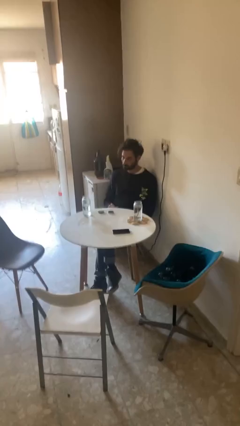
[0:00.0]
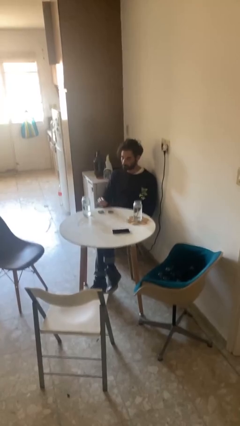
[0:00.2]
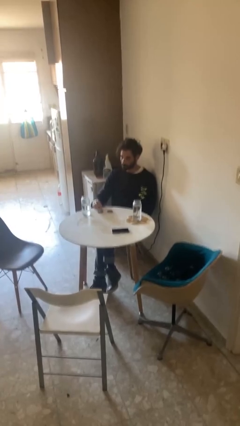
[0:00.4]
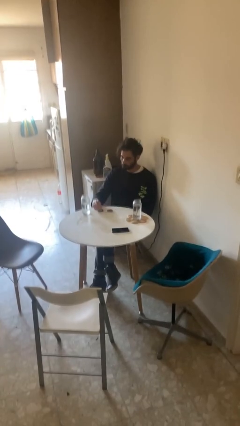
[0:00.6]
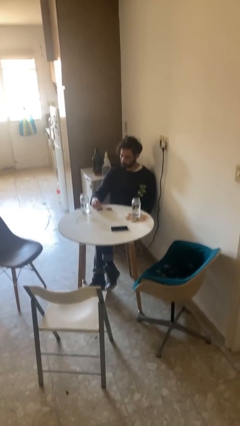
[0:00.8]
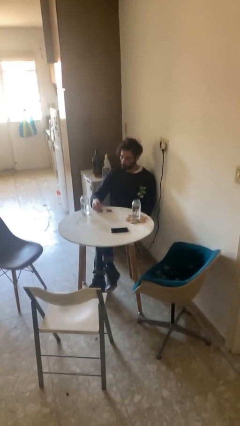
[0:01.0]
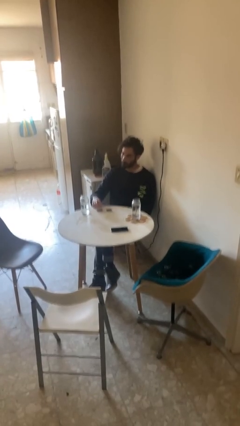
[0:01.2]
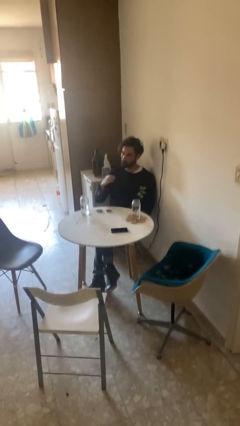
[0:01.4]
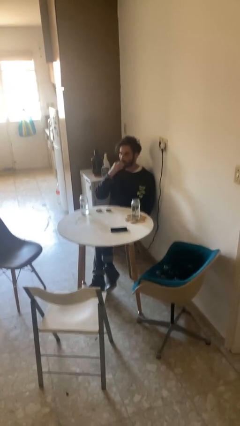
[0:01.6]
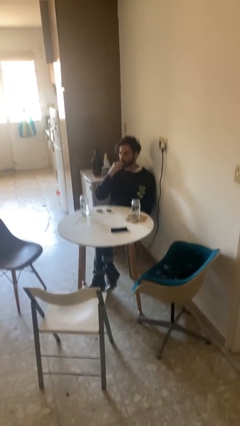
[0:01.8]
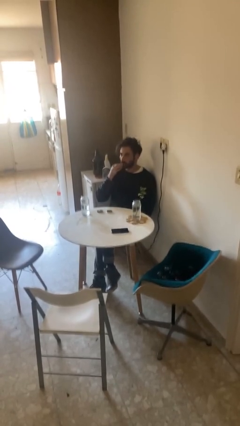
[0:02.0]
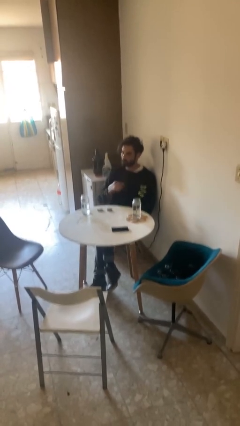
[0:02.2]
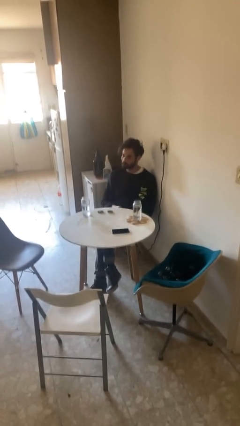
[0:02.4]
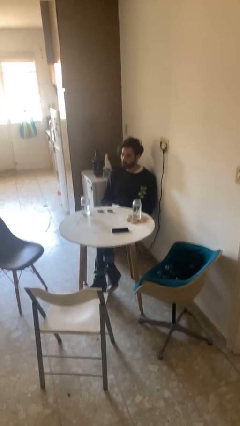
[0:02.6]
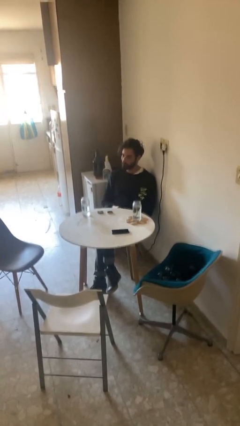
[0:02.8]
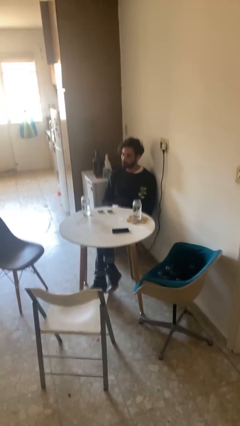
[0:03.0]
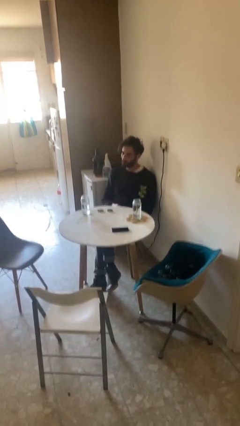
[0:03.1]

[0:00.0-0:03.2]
person takes medicine pills

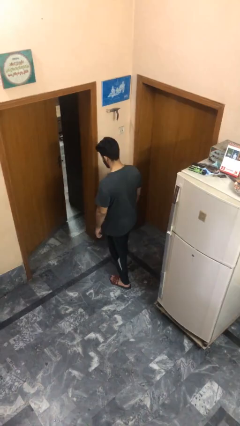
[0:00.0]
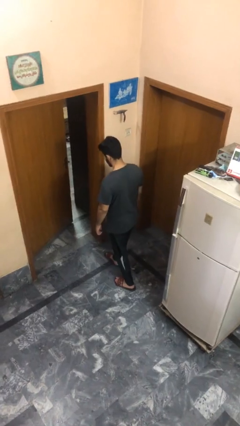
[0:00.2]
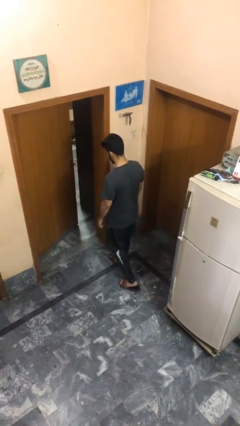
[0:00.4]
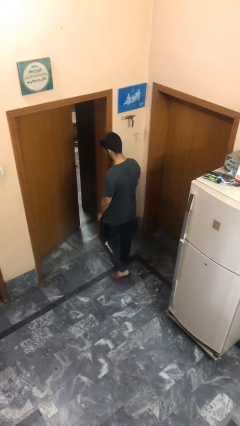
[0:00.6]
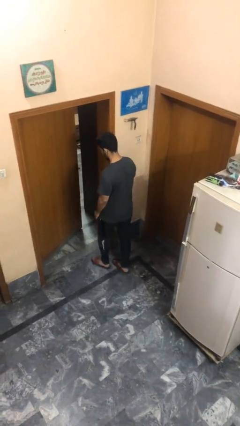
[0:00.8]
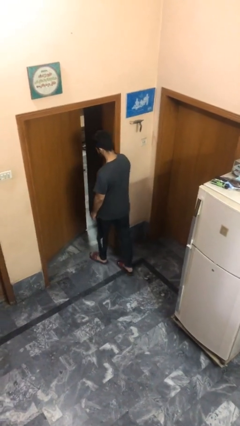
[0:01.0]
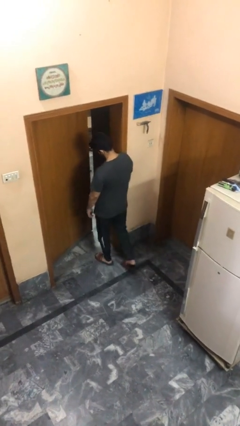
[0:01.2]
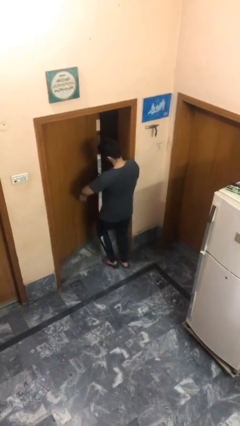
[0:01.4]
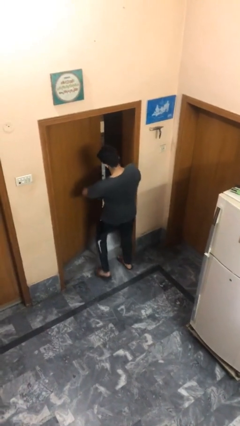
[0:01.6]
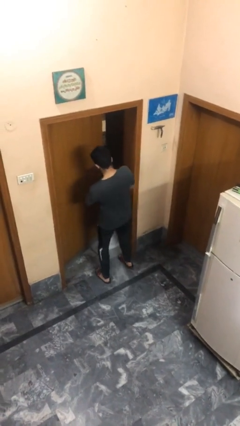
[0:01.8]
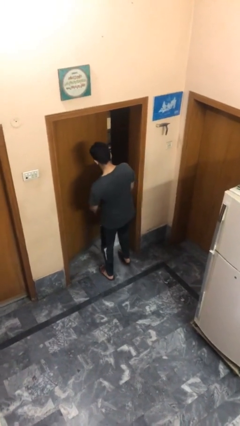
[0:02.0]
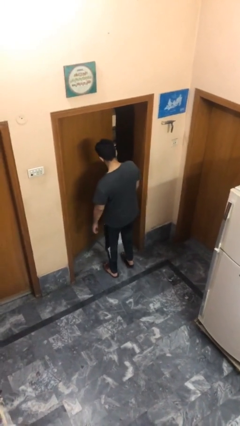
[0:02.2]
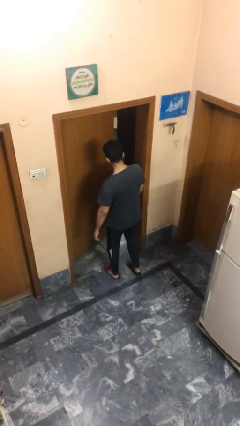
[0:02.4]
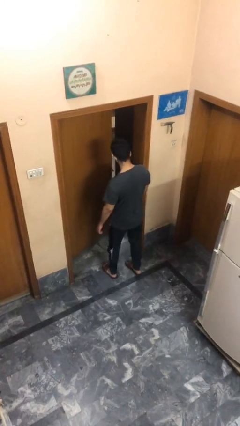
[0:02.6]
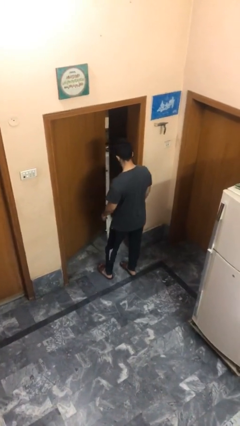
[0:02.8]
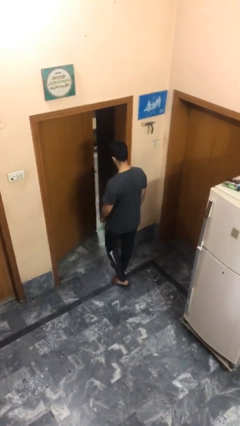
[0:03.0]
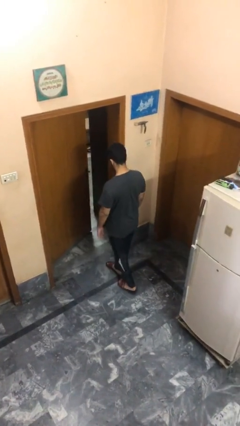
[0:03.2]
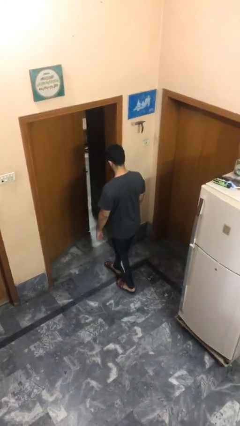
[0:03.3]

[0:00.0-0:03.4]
person bumps into wall

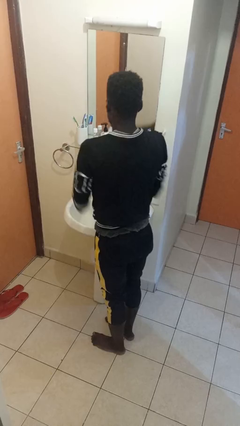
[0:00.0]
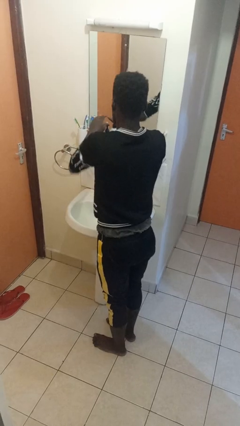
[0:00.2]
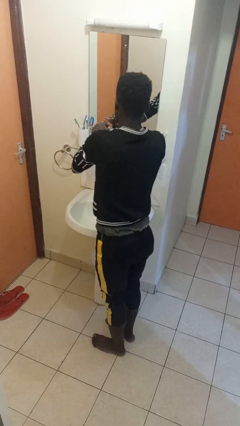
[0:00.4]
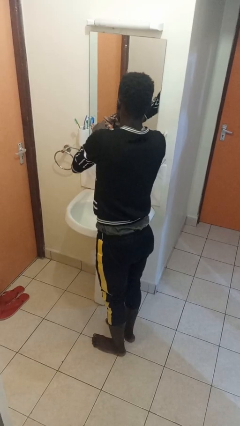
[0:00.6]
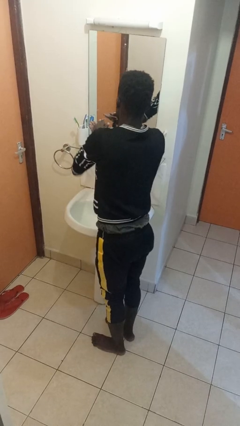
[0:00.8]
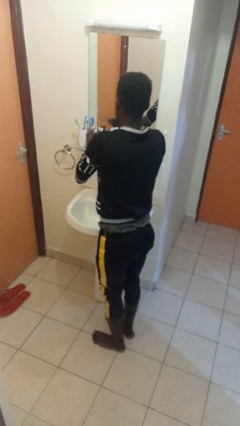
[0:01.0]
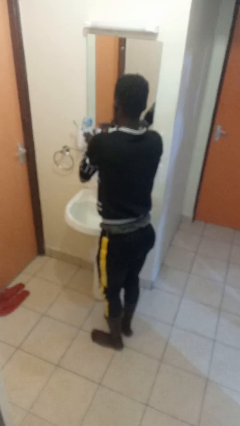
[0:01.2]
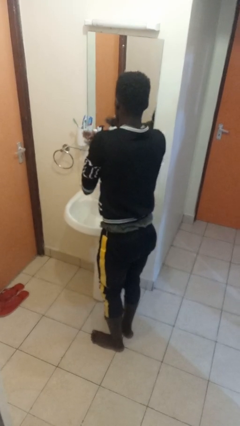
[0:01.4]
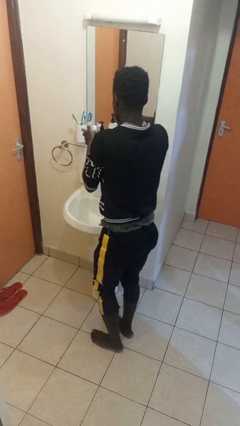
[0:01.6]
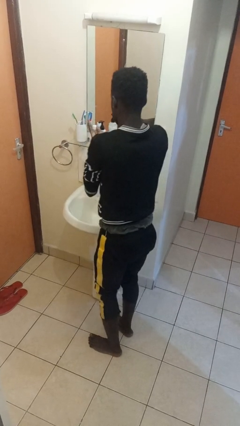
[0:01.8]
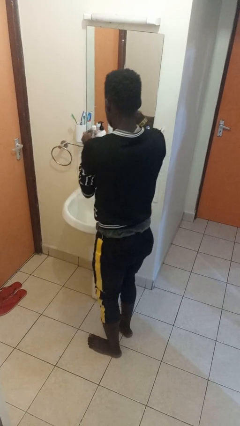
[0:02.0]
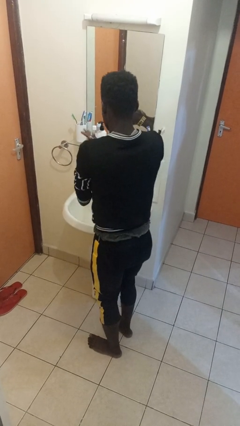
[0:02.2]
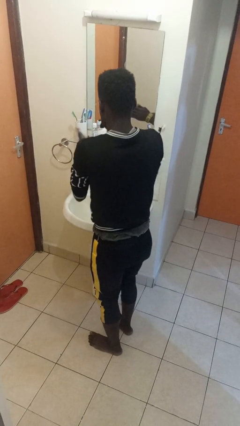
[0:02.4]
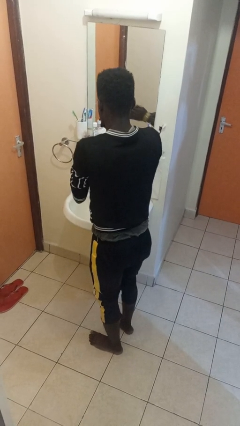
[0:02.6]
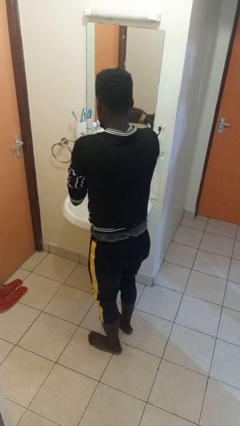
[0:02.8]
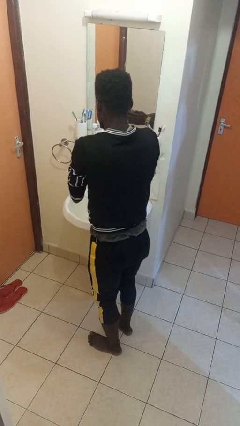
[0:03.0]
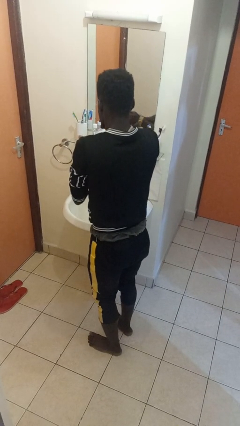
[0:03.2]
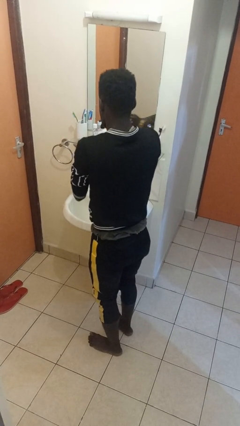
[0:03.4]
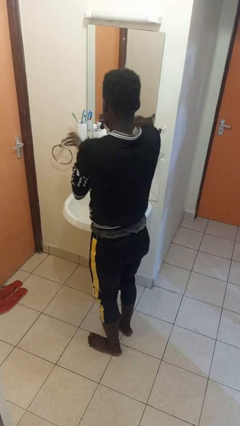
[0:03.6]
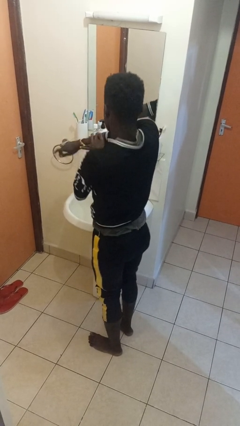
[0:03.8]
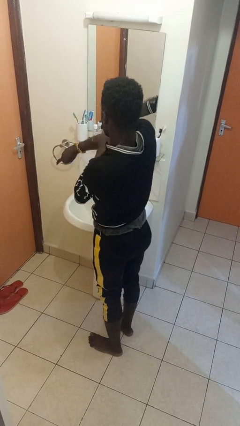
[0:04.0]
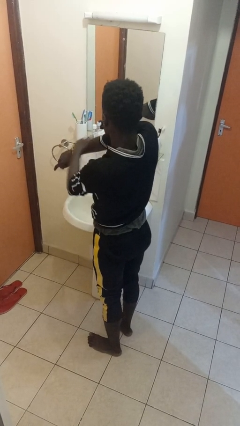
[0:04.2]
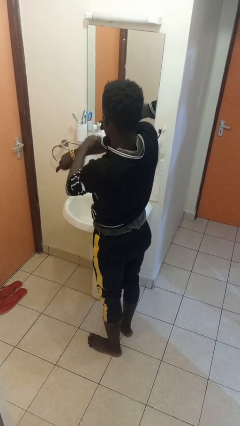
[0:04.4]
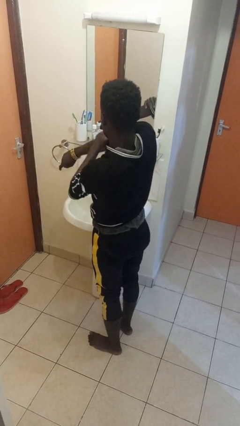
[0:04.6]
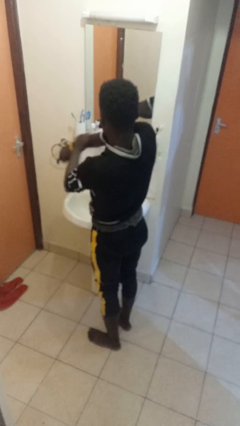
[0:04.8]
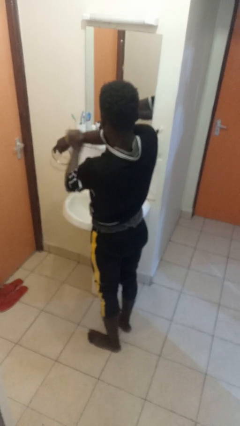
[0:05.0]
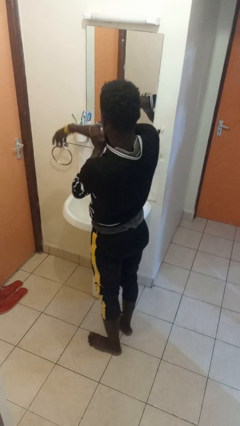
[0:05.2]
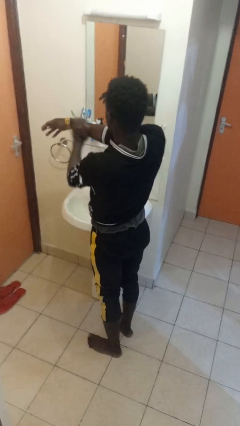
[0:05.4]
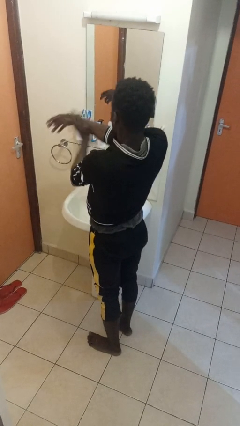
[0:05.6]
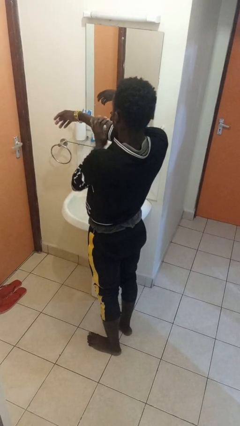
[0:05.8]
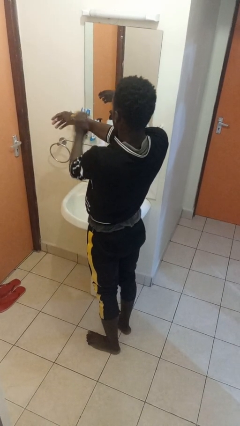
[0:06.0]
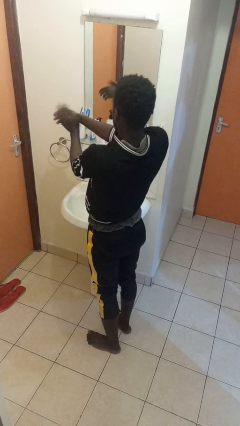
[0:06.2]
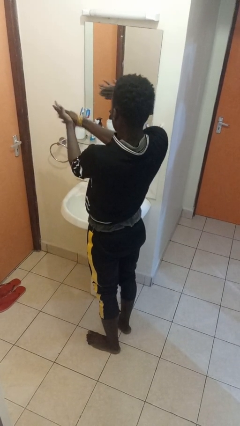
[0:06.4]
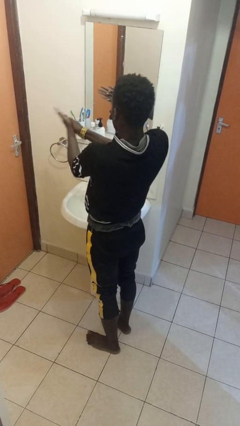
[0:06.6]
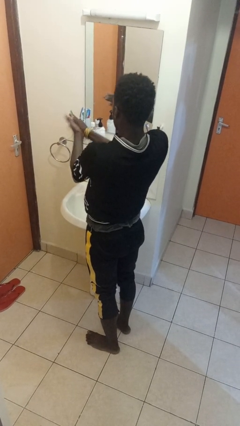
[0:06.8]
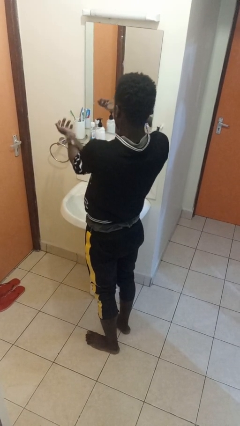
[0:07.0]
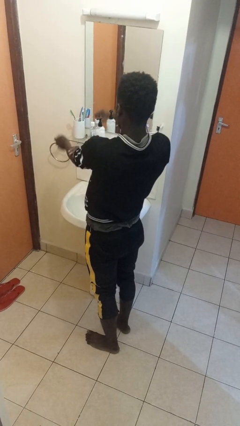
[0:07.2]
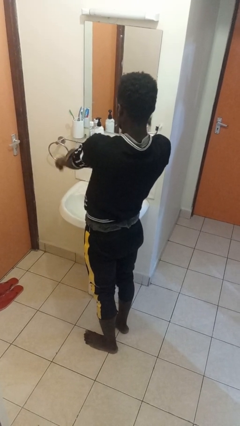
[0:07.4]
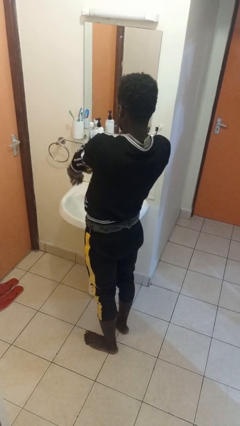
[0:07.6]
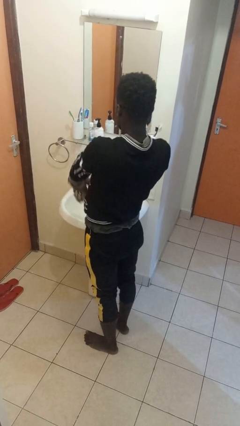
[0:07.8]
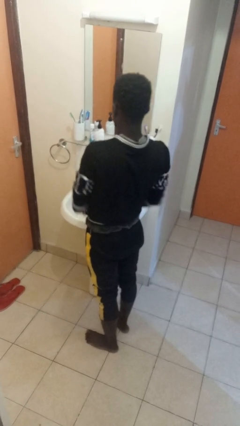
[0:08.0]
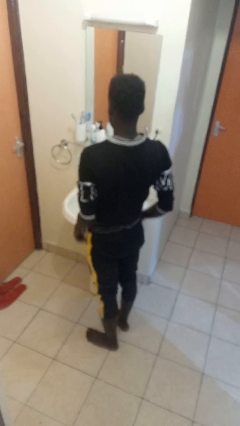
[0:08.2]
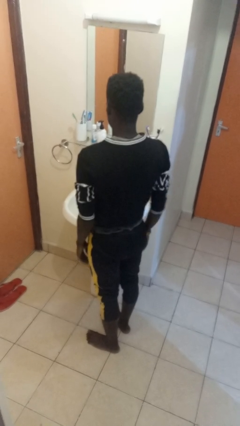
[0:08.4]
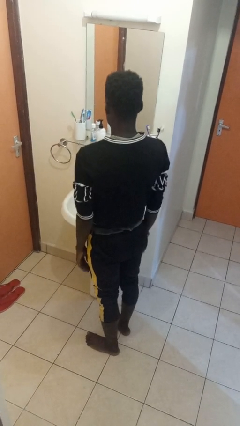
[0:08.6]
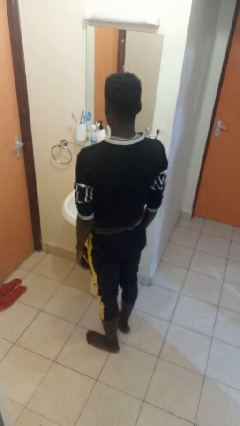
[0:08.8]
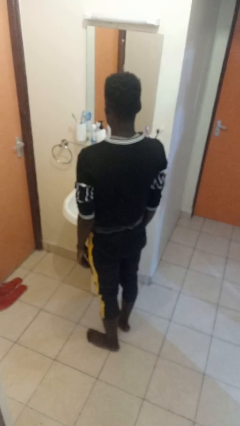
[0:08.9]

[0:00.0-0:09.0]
person applies facial moisturizer

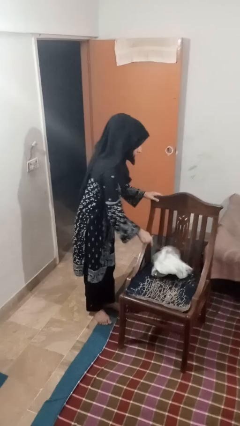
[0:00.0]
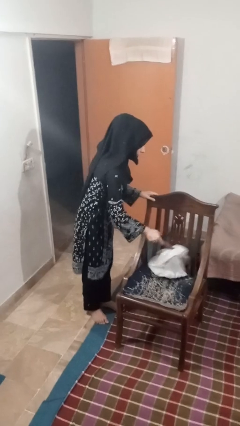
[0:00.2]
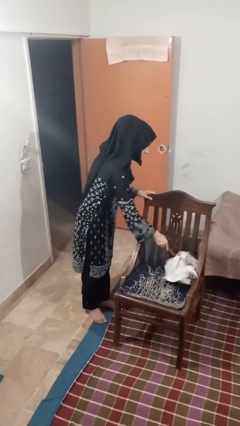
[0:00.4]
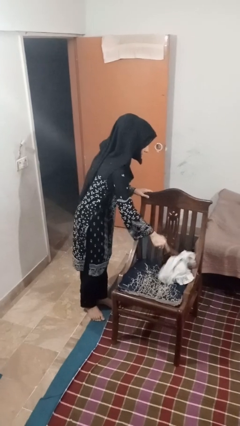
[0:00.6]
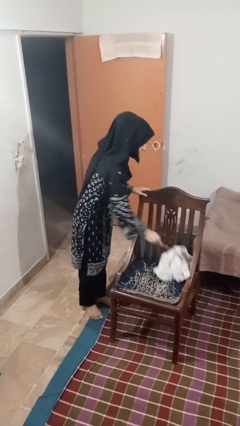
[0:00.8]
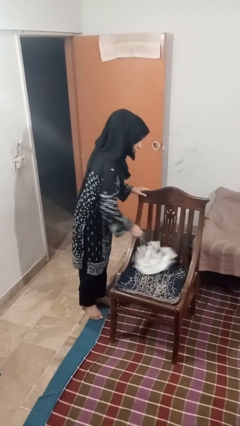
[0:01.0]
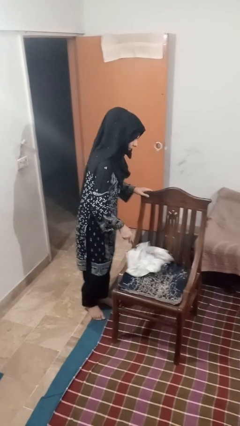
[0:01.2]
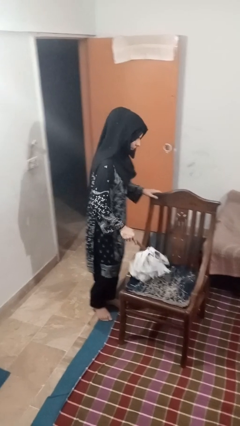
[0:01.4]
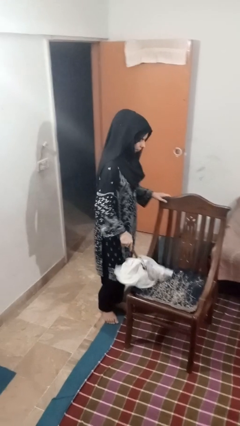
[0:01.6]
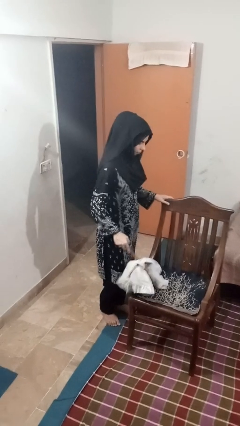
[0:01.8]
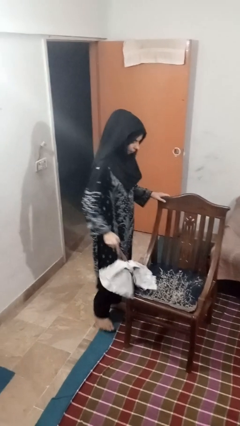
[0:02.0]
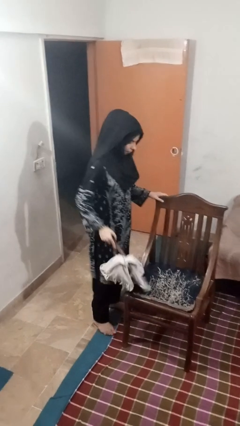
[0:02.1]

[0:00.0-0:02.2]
person dusts furniture
